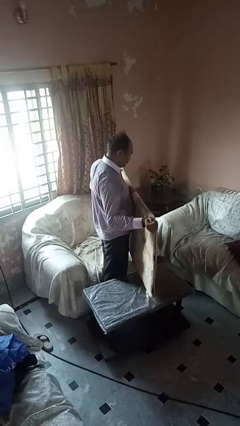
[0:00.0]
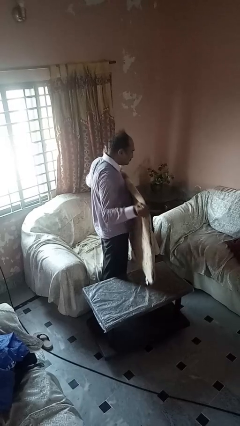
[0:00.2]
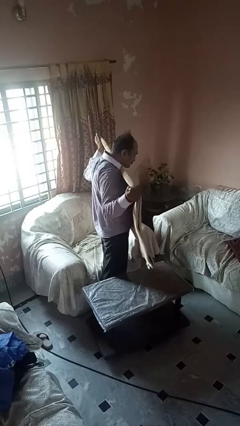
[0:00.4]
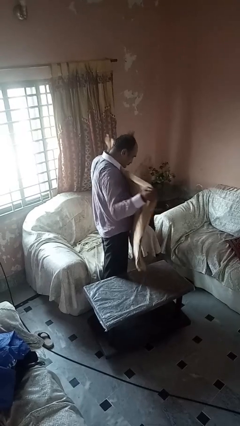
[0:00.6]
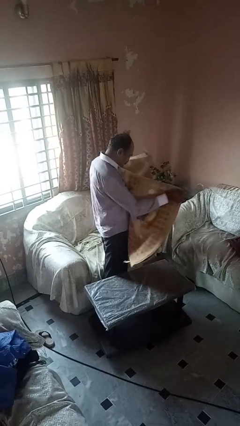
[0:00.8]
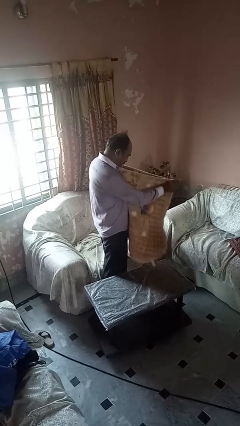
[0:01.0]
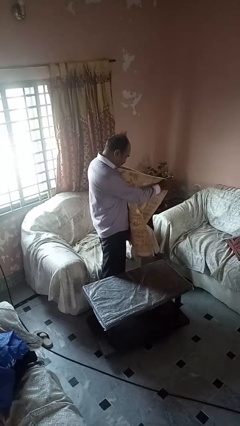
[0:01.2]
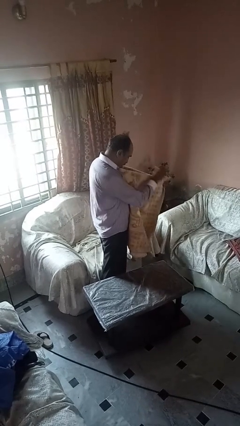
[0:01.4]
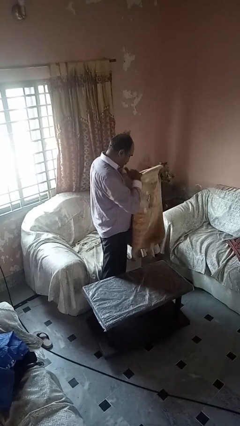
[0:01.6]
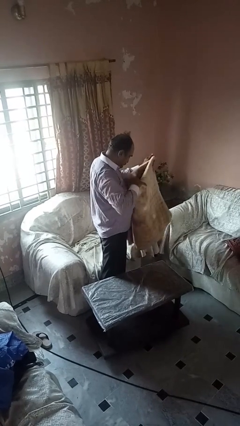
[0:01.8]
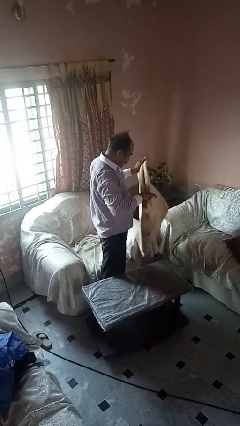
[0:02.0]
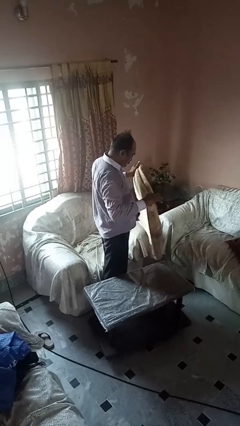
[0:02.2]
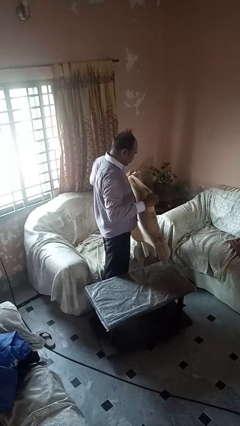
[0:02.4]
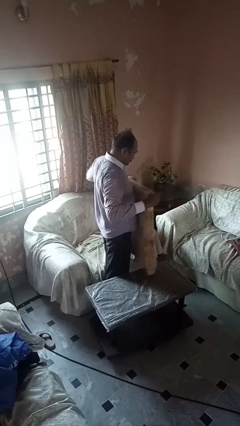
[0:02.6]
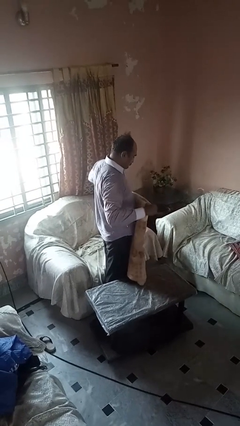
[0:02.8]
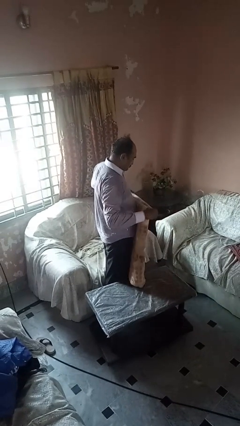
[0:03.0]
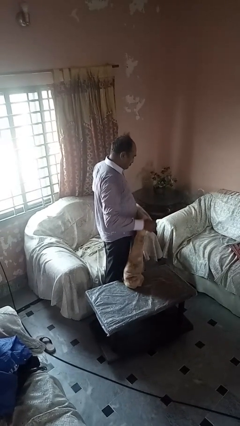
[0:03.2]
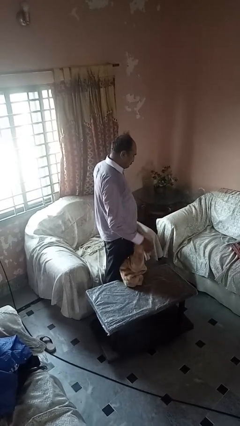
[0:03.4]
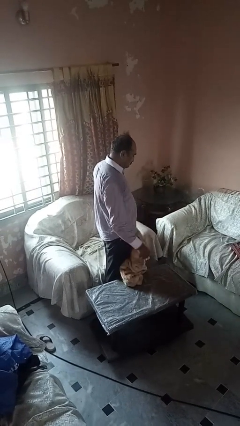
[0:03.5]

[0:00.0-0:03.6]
person folds blanket

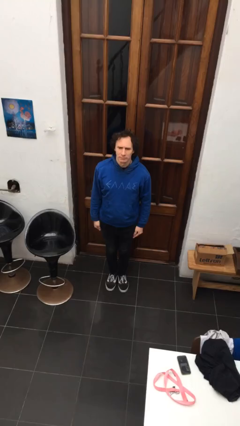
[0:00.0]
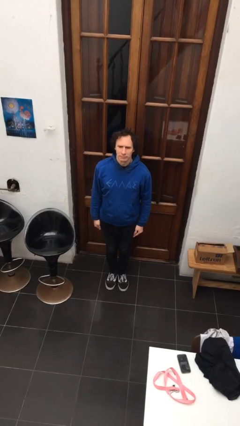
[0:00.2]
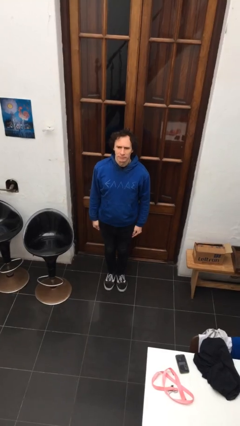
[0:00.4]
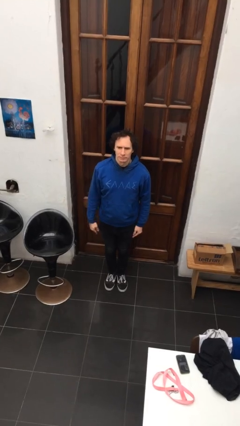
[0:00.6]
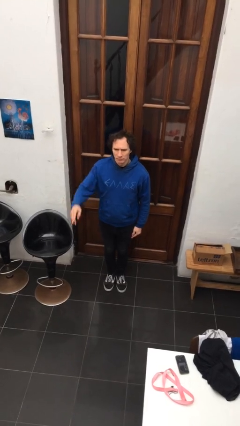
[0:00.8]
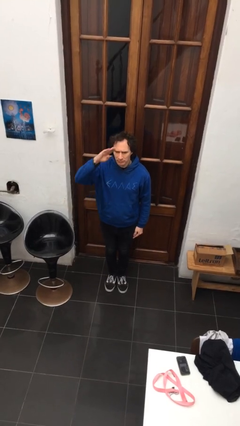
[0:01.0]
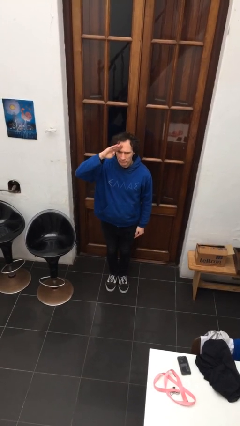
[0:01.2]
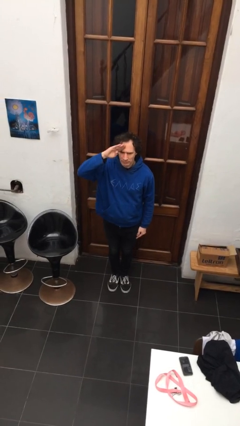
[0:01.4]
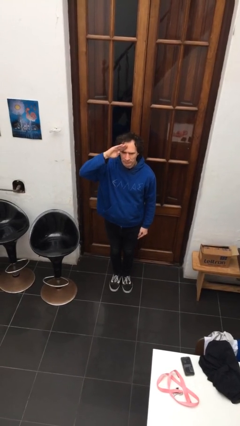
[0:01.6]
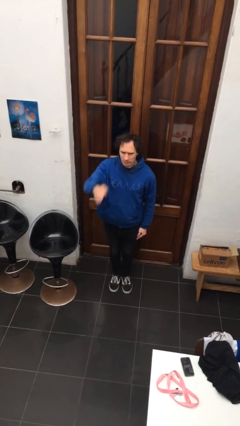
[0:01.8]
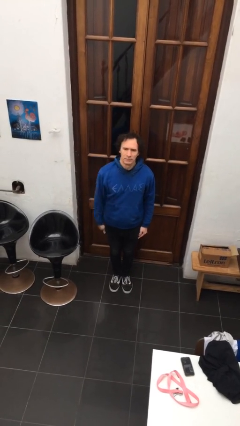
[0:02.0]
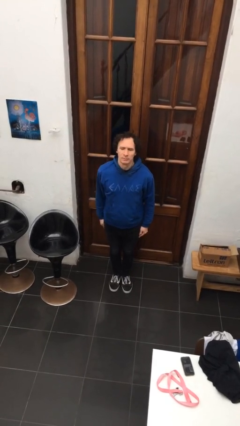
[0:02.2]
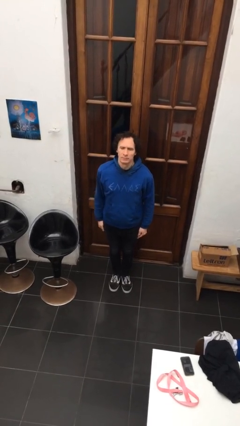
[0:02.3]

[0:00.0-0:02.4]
person salutes

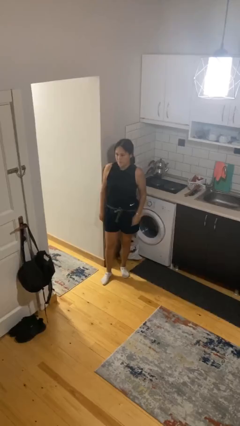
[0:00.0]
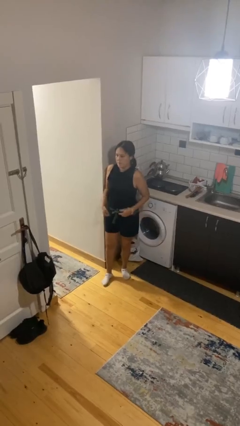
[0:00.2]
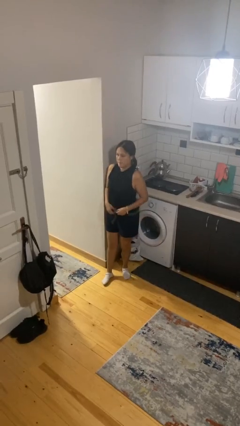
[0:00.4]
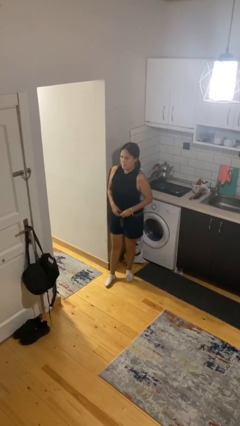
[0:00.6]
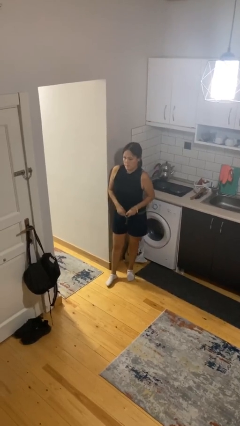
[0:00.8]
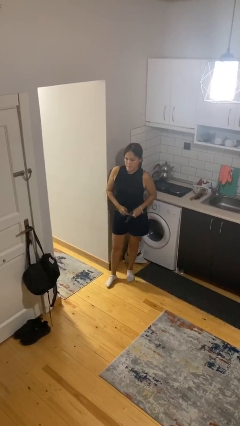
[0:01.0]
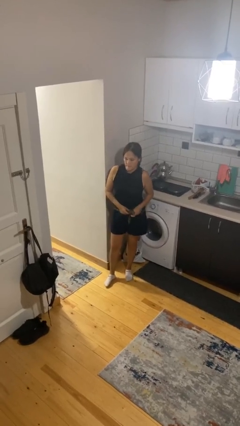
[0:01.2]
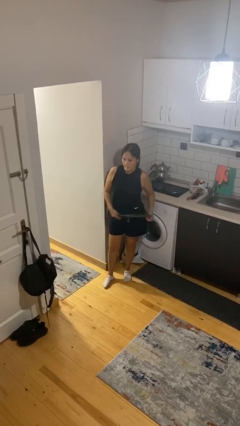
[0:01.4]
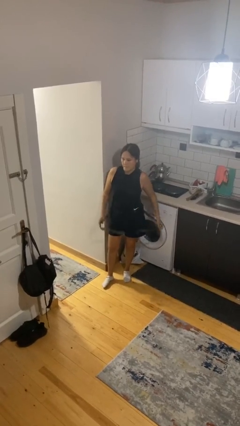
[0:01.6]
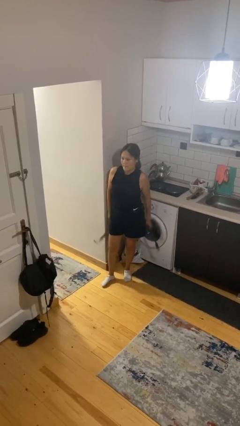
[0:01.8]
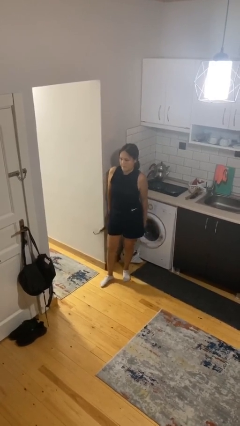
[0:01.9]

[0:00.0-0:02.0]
person takes off belt

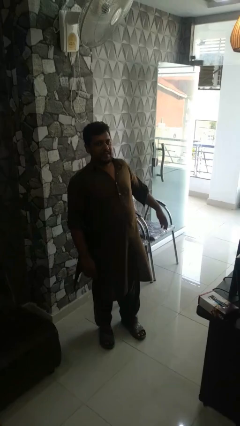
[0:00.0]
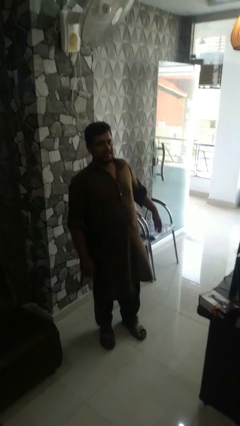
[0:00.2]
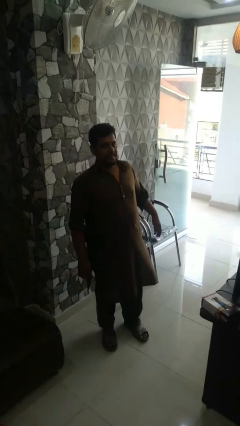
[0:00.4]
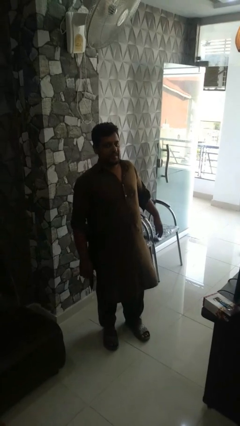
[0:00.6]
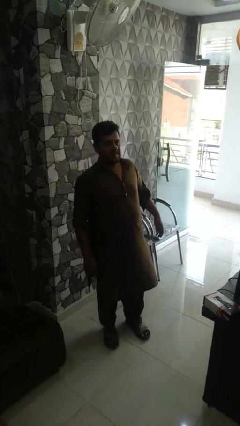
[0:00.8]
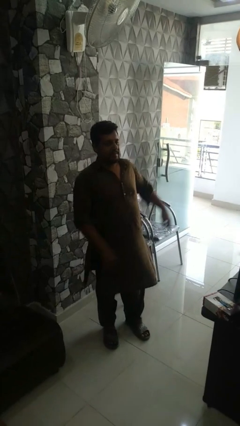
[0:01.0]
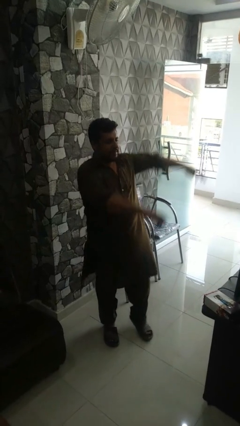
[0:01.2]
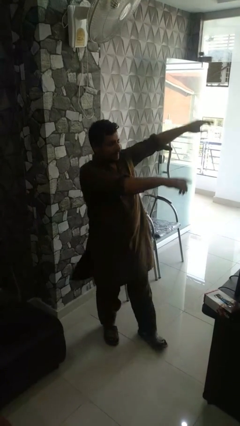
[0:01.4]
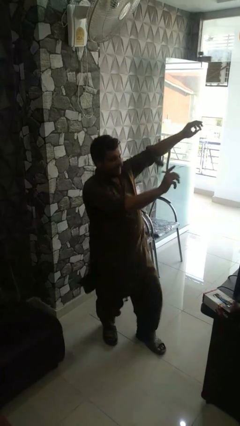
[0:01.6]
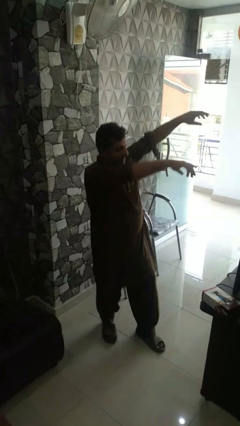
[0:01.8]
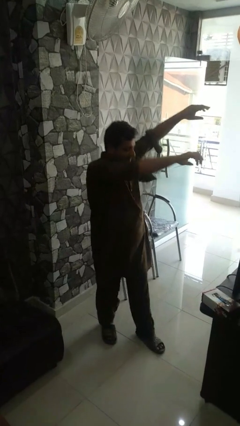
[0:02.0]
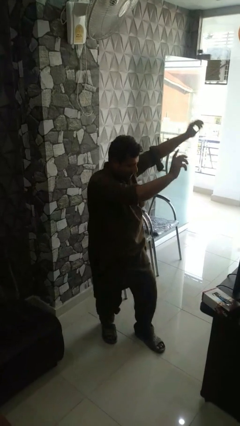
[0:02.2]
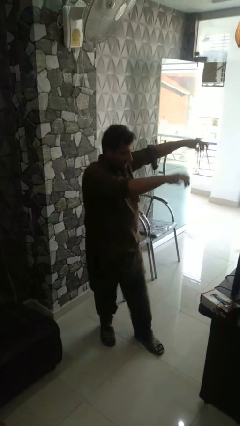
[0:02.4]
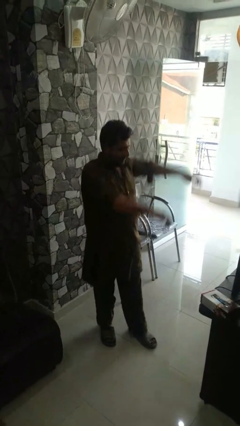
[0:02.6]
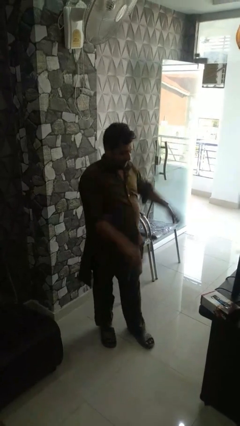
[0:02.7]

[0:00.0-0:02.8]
person dances in place

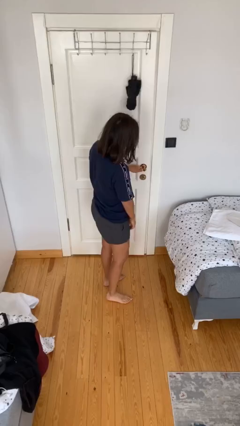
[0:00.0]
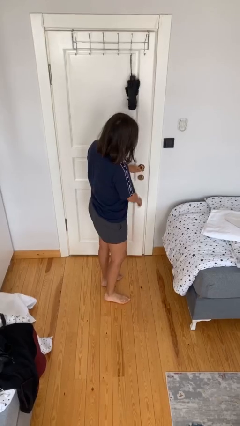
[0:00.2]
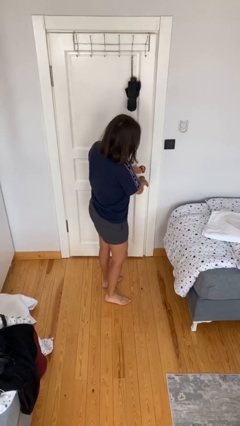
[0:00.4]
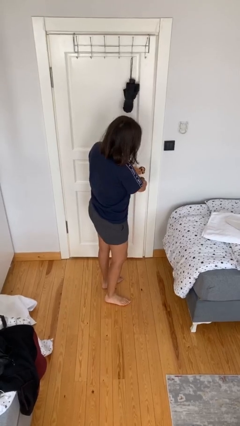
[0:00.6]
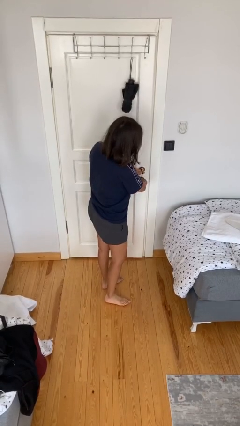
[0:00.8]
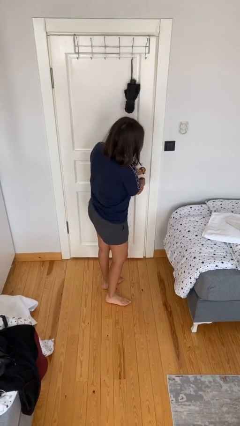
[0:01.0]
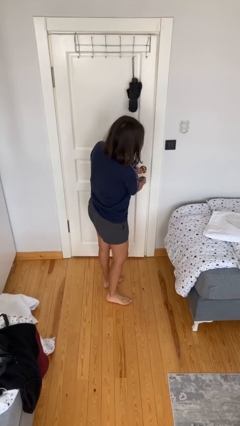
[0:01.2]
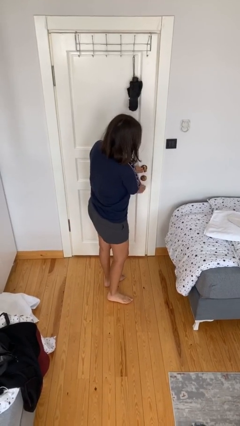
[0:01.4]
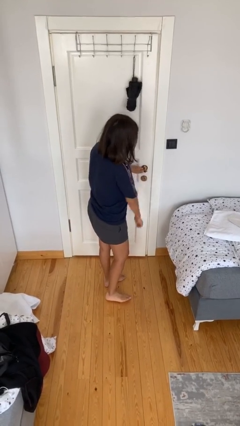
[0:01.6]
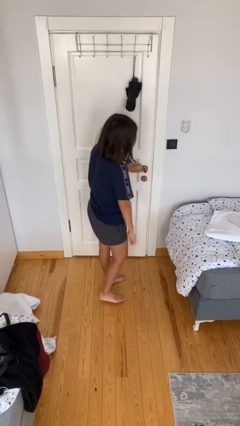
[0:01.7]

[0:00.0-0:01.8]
person locks door with keys

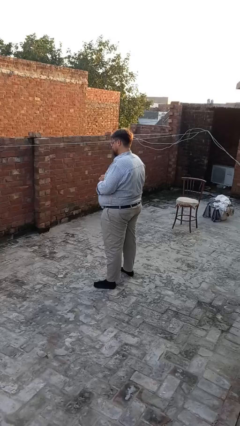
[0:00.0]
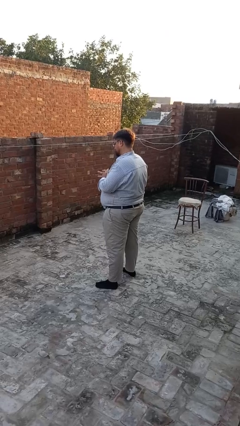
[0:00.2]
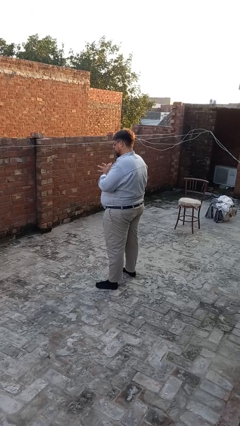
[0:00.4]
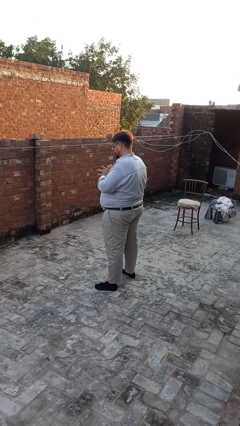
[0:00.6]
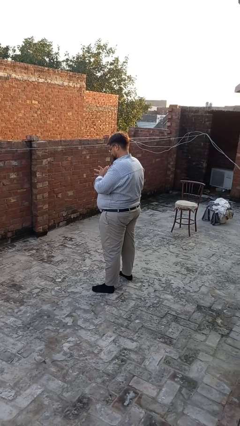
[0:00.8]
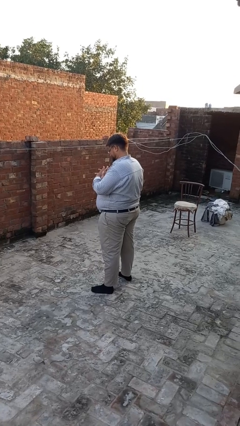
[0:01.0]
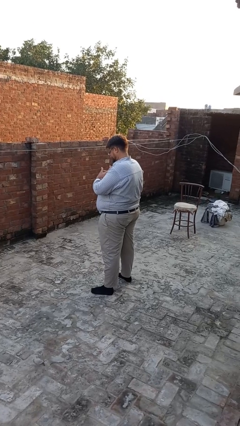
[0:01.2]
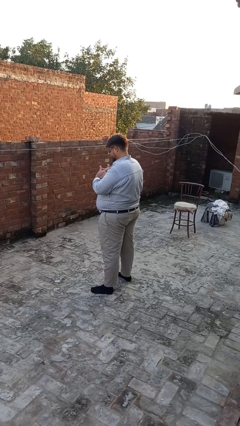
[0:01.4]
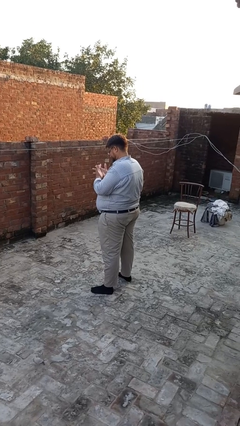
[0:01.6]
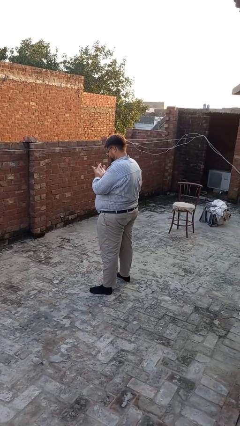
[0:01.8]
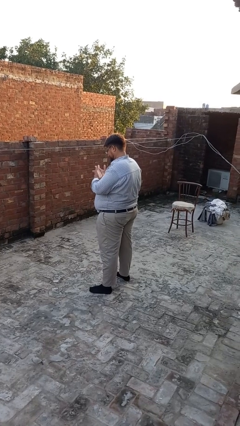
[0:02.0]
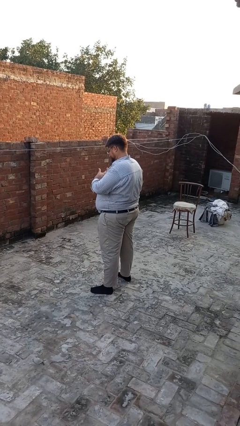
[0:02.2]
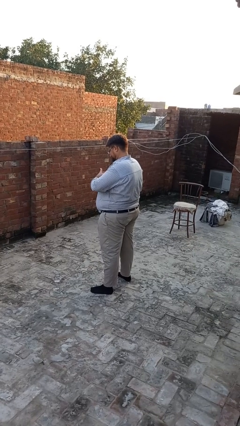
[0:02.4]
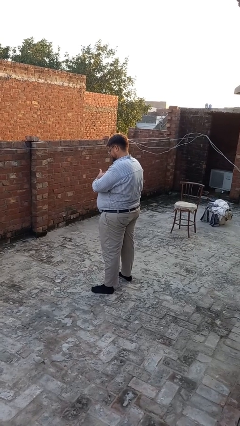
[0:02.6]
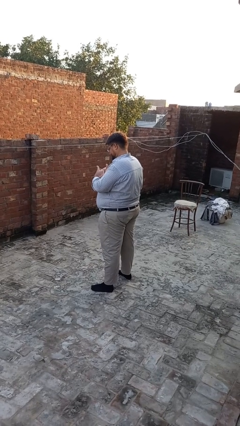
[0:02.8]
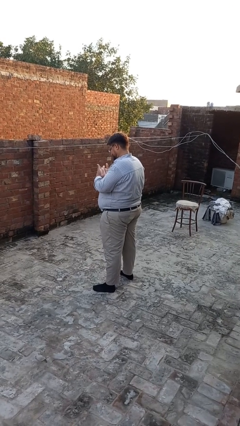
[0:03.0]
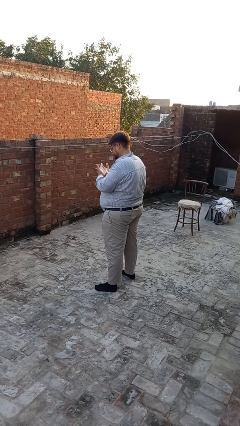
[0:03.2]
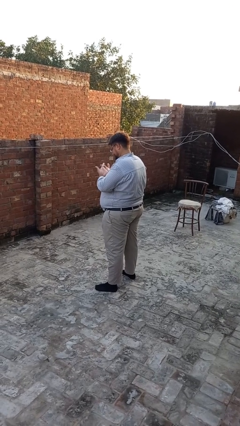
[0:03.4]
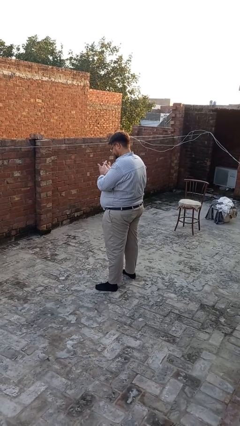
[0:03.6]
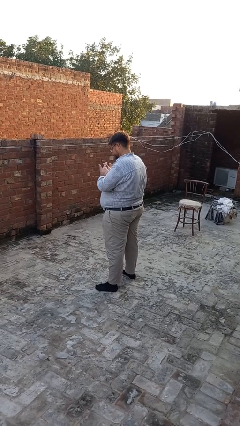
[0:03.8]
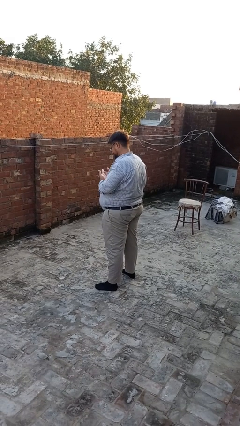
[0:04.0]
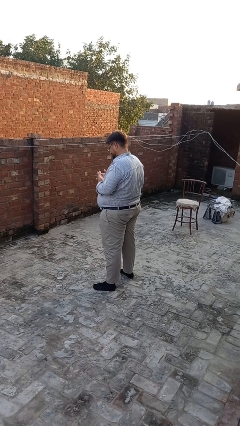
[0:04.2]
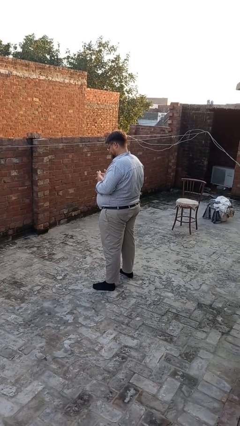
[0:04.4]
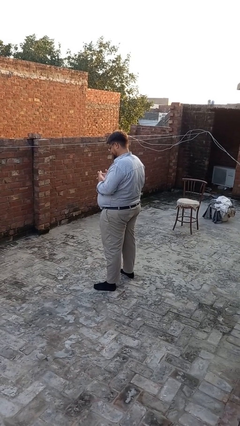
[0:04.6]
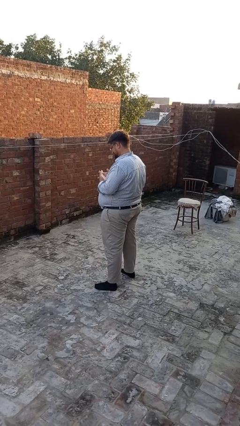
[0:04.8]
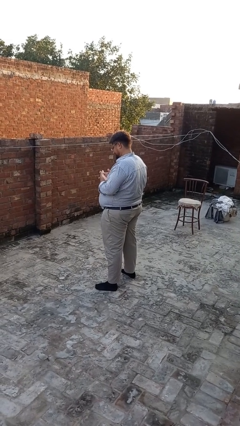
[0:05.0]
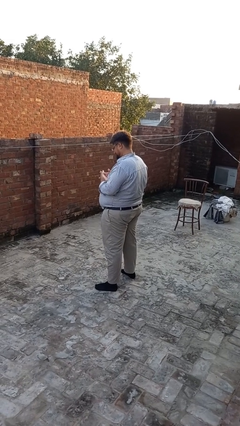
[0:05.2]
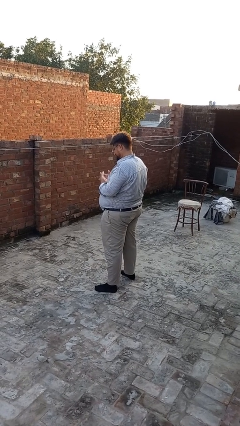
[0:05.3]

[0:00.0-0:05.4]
person cracks knuckles
